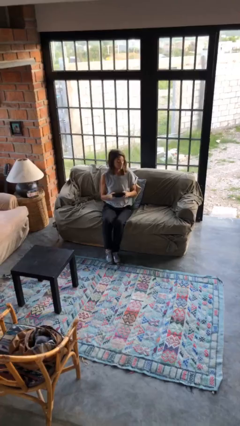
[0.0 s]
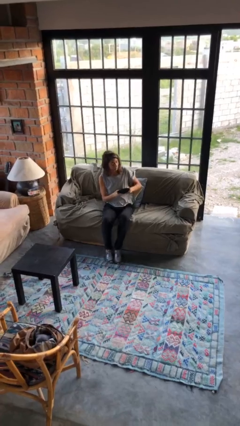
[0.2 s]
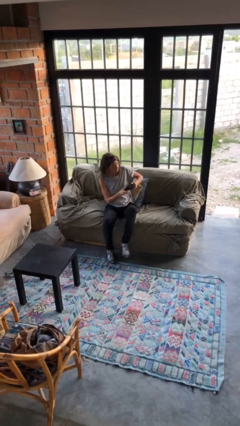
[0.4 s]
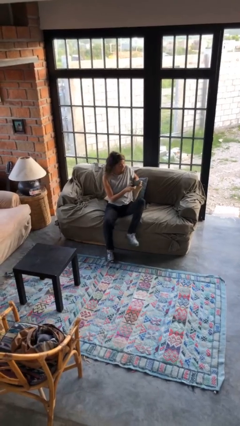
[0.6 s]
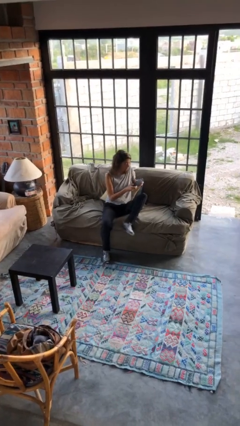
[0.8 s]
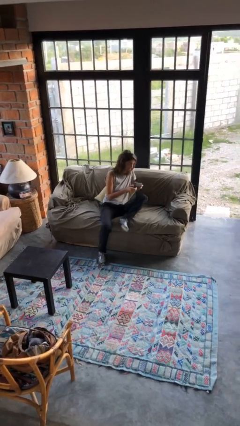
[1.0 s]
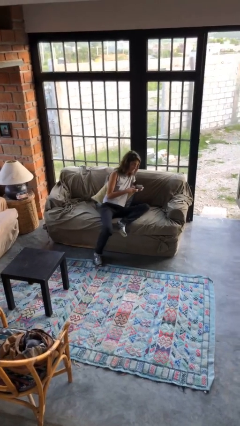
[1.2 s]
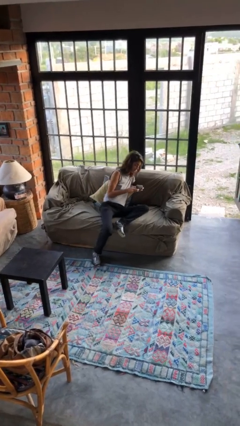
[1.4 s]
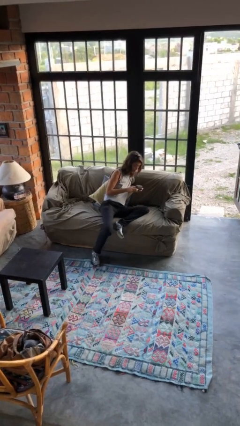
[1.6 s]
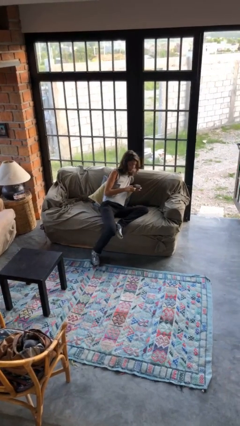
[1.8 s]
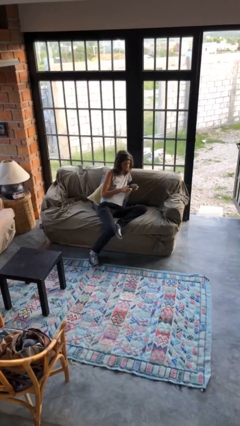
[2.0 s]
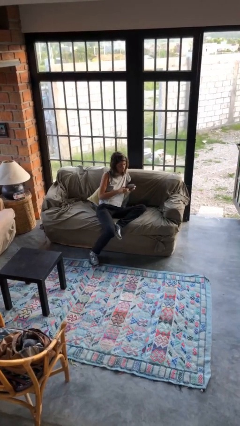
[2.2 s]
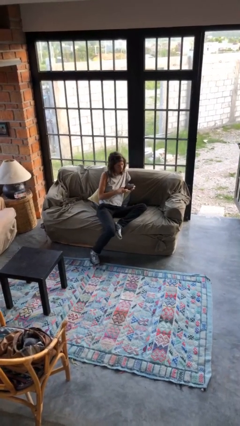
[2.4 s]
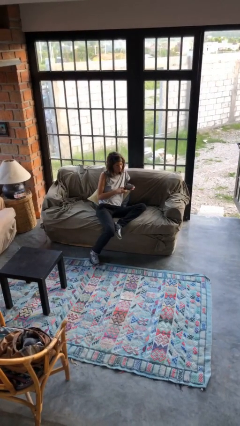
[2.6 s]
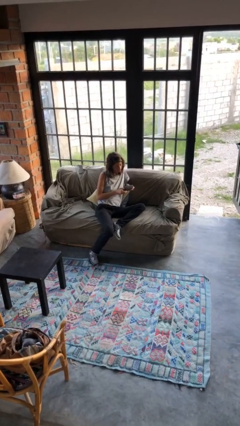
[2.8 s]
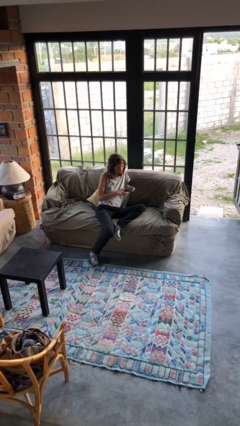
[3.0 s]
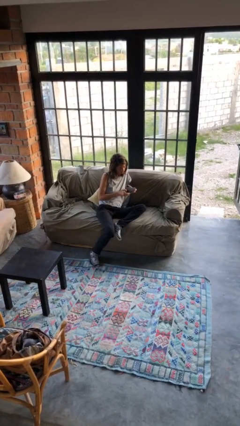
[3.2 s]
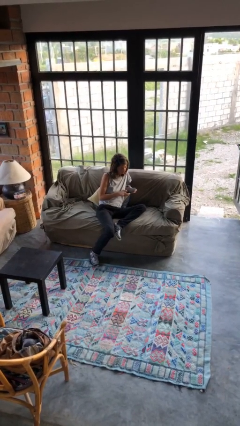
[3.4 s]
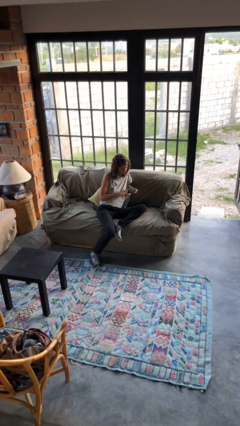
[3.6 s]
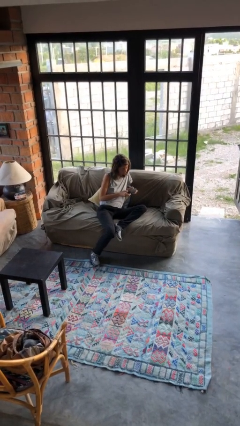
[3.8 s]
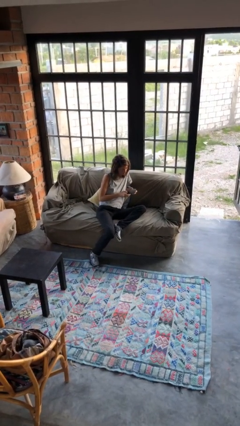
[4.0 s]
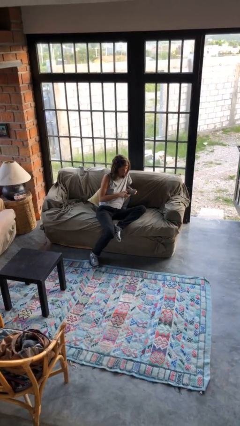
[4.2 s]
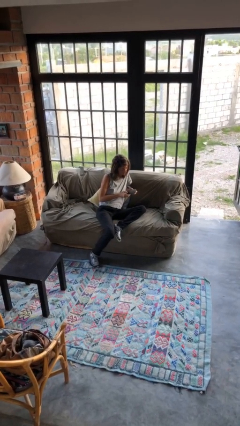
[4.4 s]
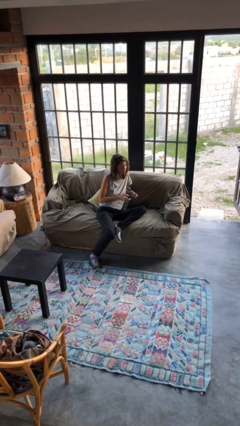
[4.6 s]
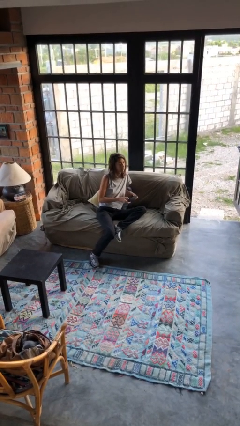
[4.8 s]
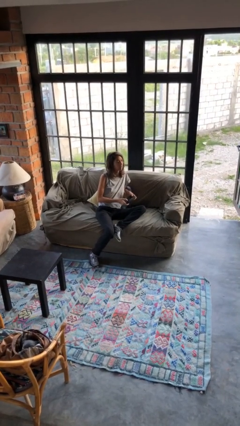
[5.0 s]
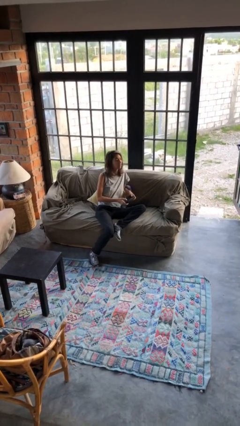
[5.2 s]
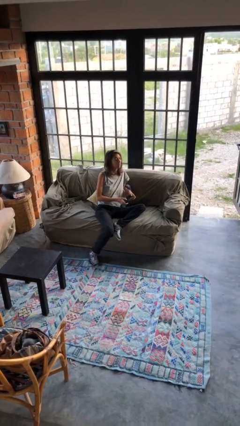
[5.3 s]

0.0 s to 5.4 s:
person interacts with handheld game

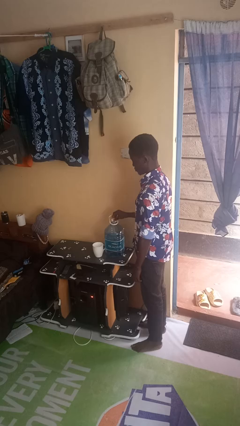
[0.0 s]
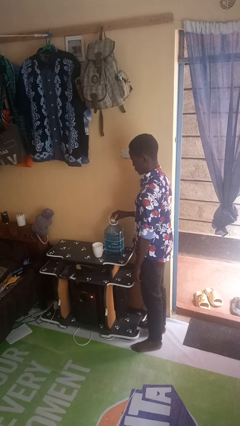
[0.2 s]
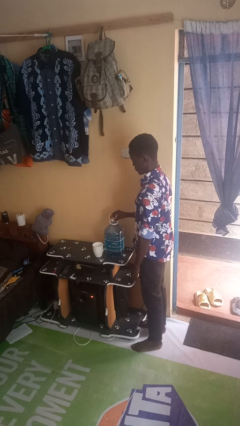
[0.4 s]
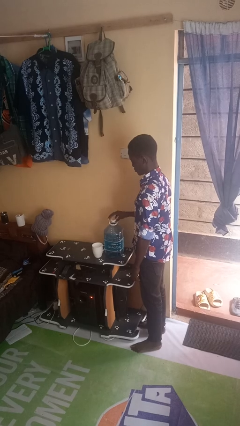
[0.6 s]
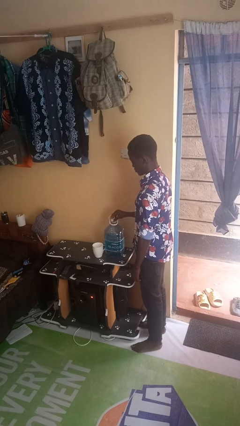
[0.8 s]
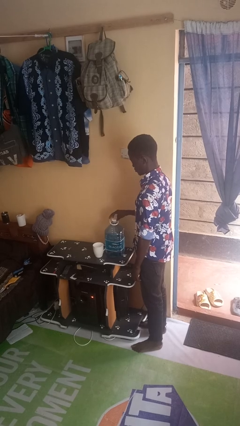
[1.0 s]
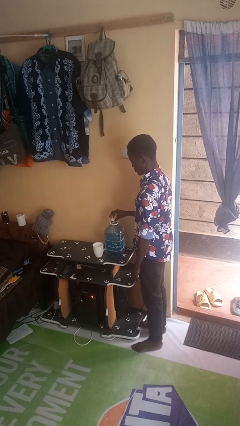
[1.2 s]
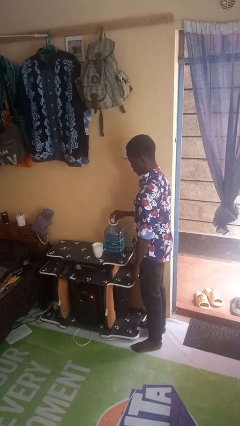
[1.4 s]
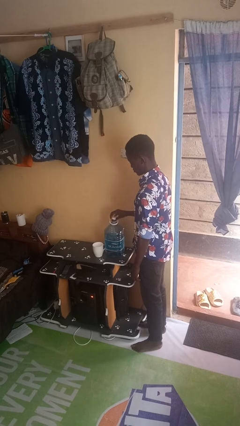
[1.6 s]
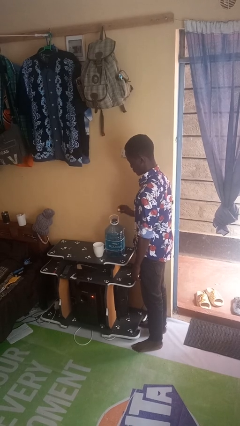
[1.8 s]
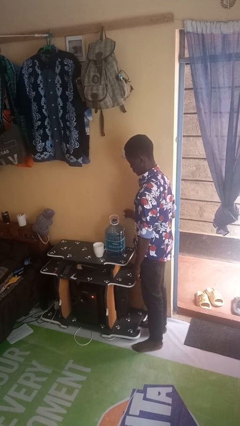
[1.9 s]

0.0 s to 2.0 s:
person unscrews lid from bottle

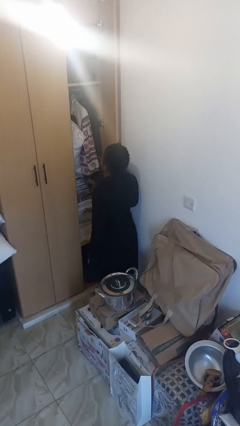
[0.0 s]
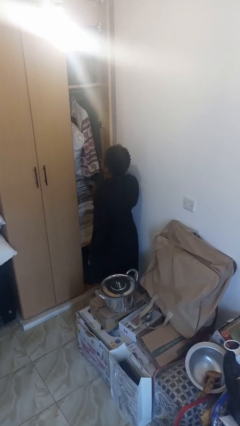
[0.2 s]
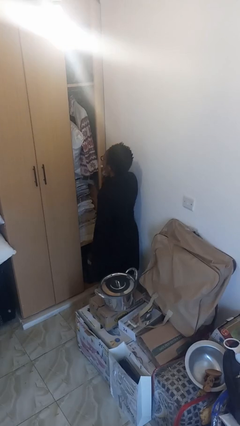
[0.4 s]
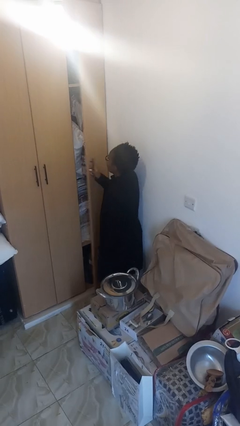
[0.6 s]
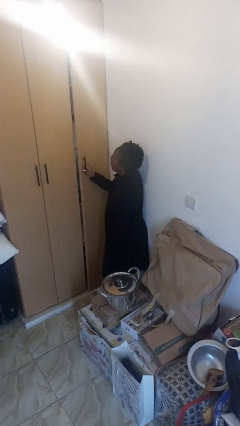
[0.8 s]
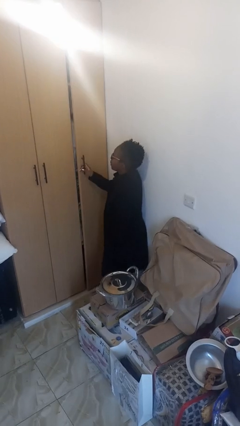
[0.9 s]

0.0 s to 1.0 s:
person closes closet door

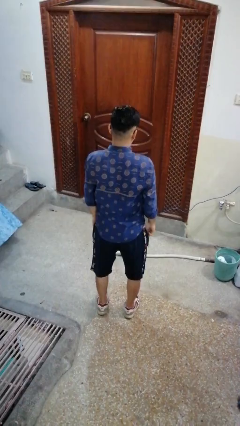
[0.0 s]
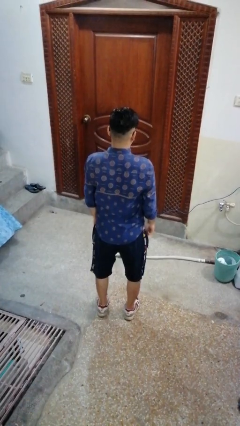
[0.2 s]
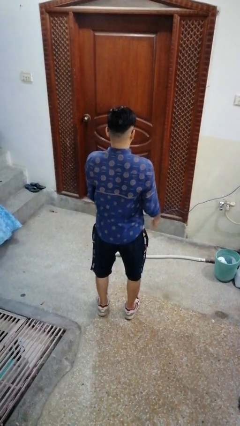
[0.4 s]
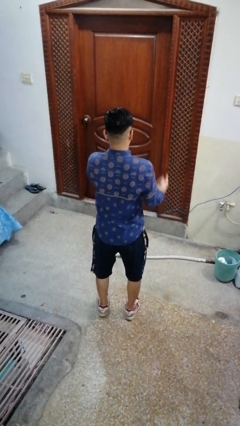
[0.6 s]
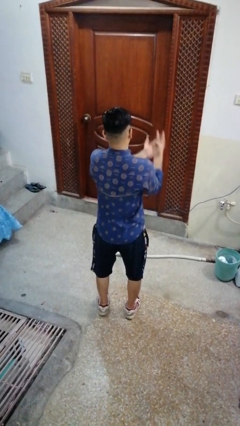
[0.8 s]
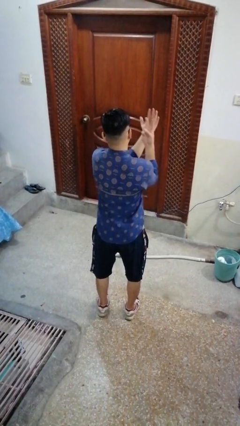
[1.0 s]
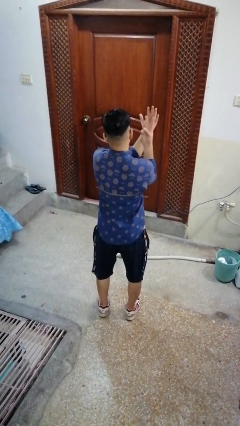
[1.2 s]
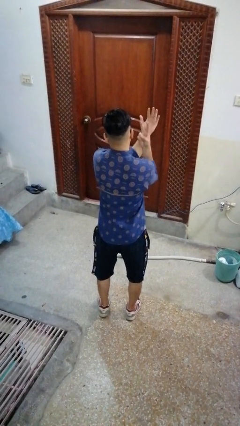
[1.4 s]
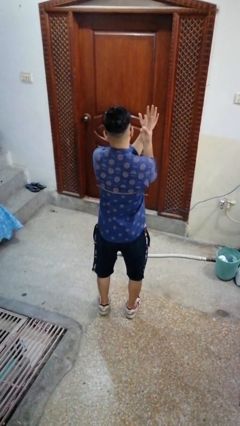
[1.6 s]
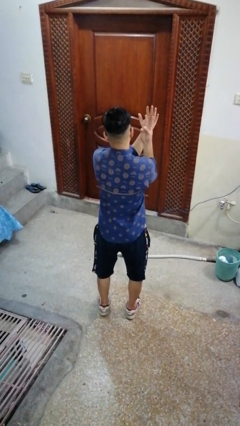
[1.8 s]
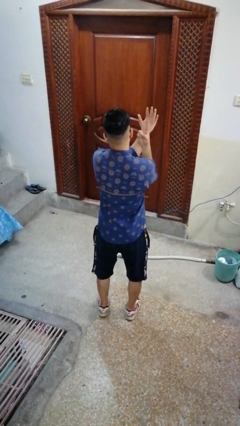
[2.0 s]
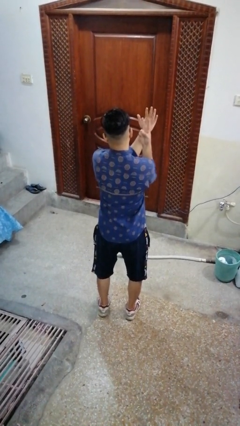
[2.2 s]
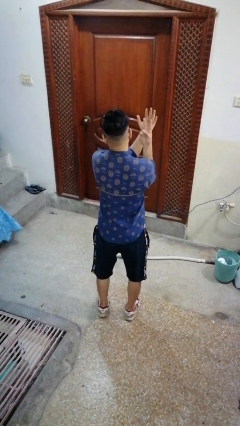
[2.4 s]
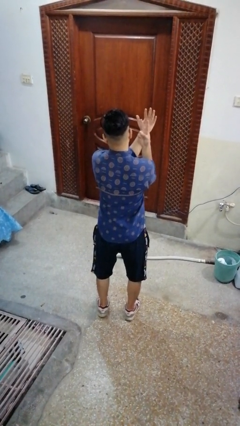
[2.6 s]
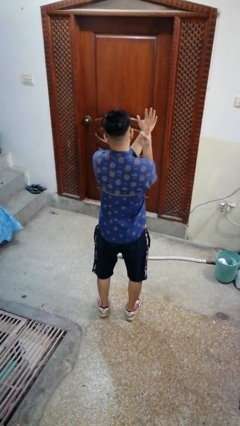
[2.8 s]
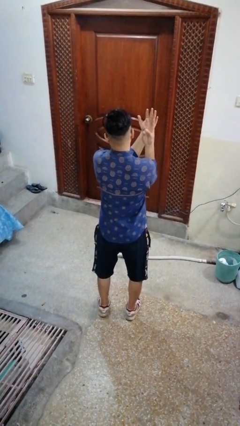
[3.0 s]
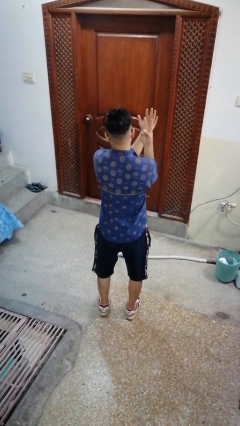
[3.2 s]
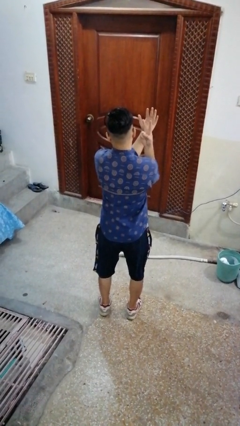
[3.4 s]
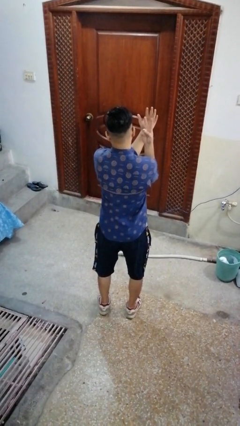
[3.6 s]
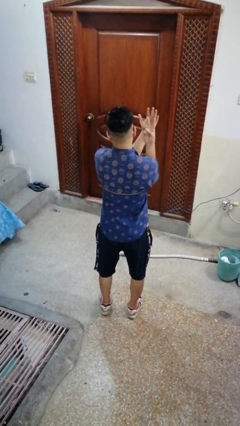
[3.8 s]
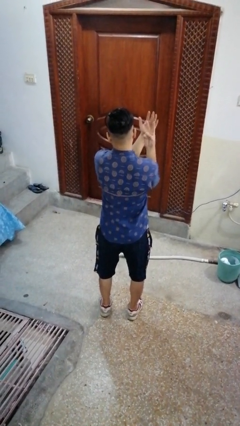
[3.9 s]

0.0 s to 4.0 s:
person gestures watch closely

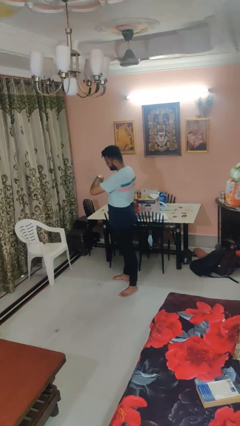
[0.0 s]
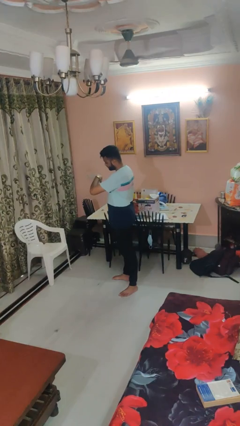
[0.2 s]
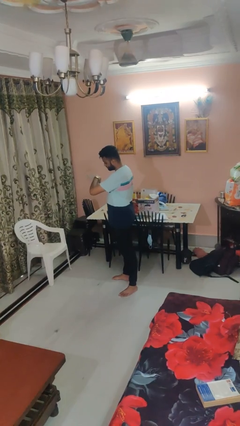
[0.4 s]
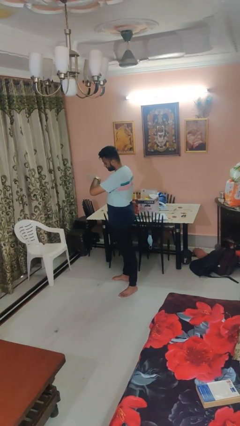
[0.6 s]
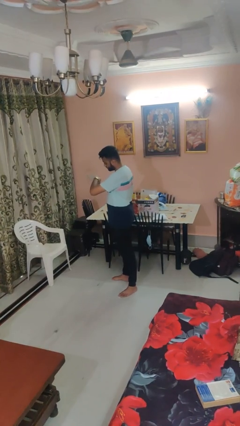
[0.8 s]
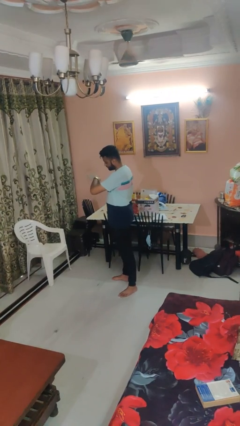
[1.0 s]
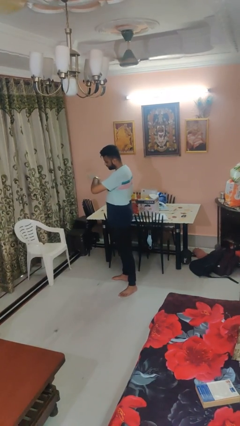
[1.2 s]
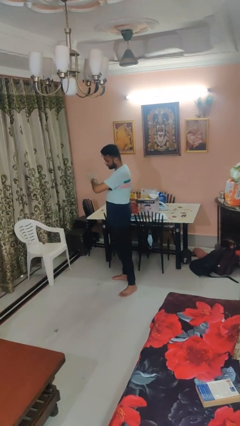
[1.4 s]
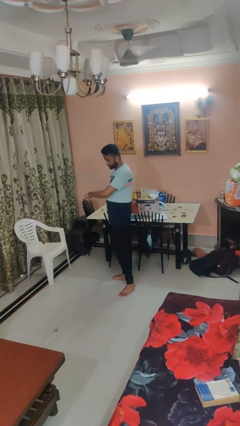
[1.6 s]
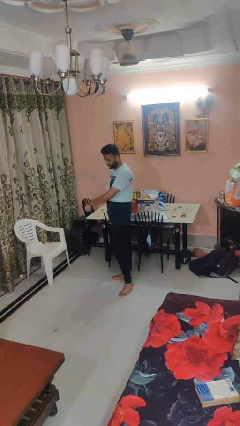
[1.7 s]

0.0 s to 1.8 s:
person looks at wristwatch

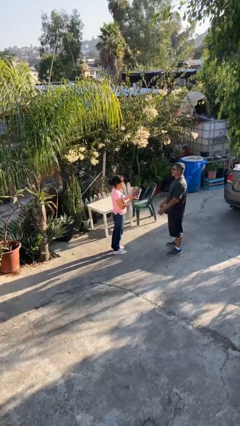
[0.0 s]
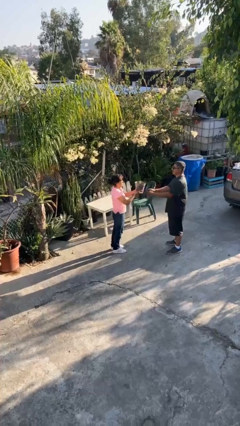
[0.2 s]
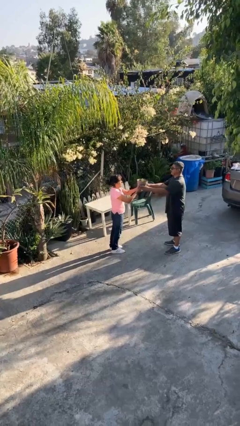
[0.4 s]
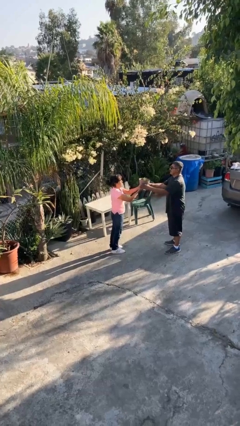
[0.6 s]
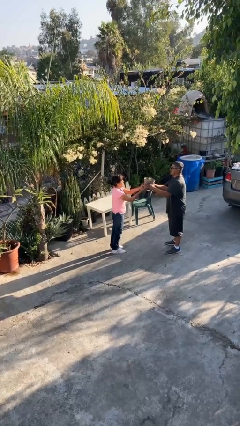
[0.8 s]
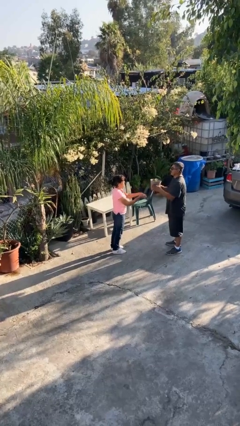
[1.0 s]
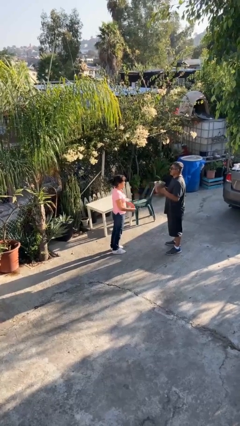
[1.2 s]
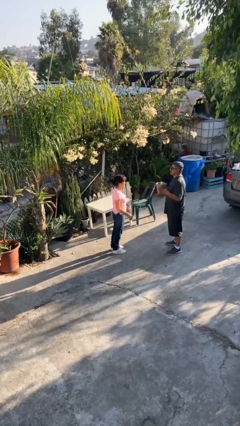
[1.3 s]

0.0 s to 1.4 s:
person transfers object to person

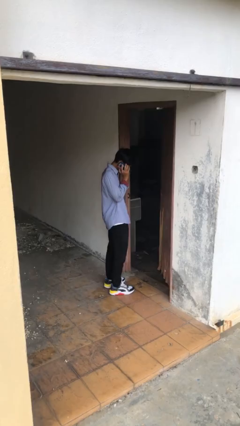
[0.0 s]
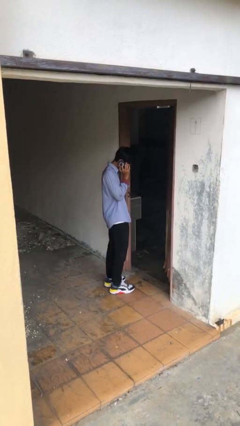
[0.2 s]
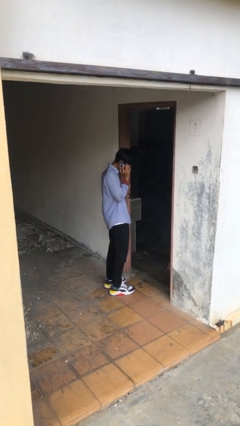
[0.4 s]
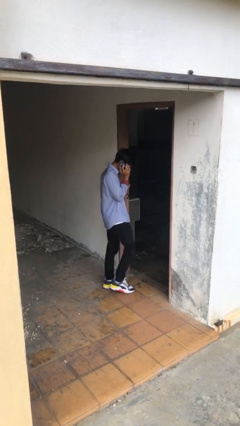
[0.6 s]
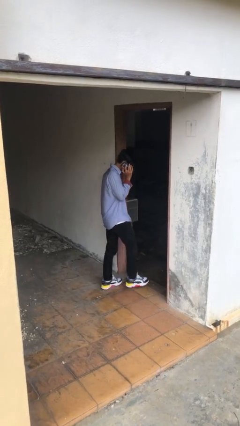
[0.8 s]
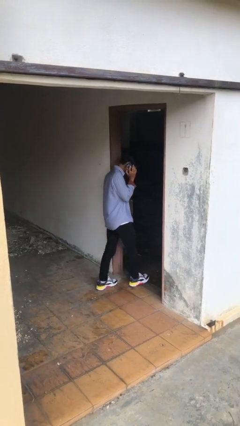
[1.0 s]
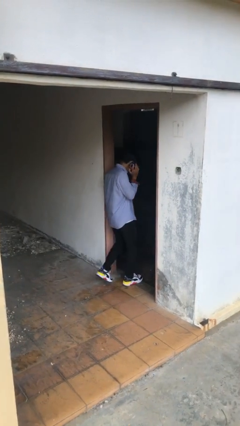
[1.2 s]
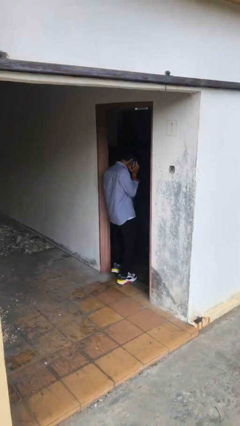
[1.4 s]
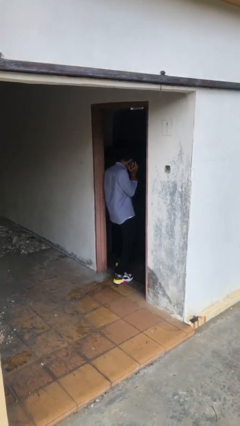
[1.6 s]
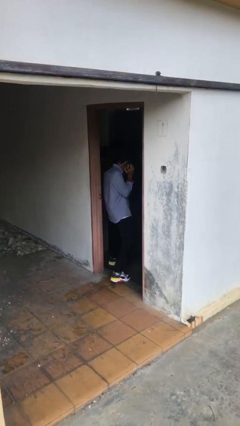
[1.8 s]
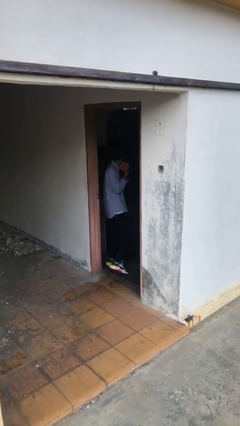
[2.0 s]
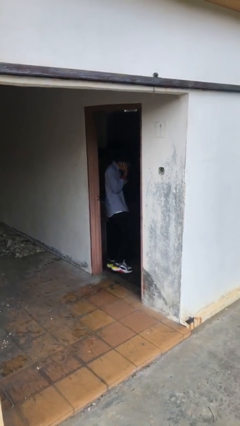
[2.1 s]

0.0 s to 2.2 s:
person exits scene through structure
